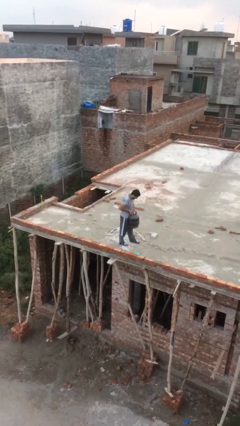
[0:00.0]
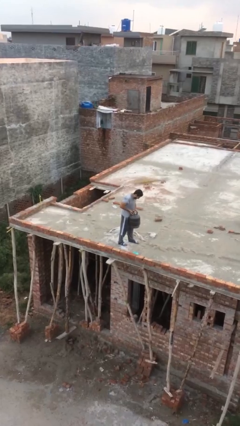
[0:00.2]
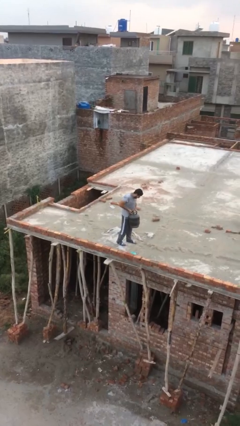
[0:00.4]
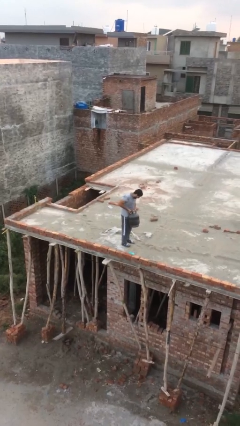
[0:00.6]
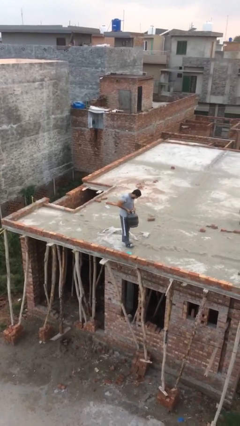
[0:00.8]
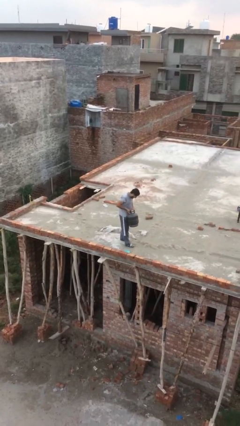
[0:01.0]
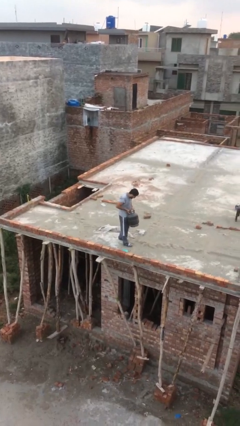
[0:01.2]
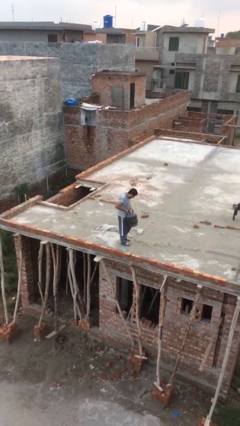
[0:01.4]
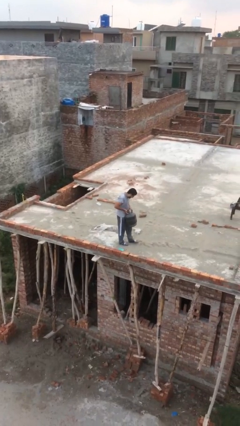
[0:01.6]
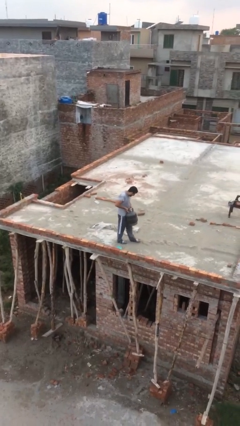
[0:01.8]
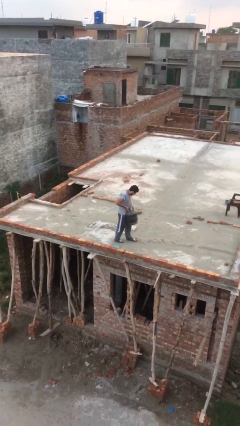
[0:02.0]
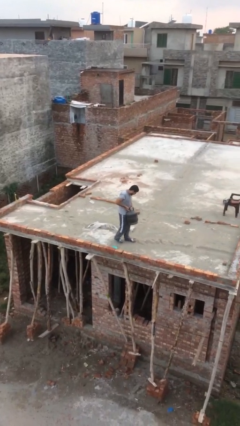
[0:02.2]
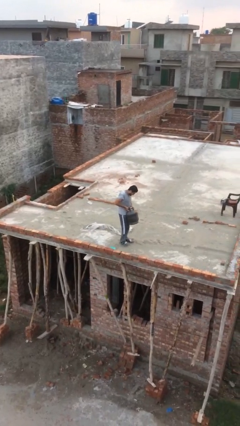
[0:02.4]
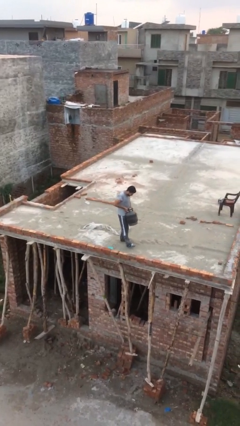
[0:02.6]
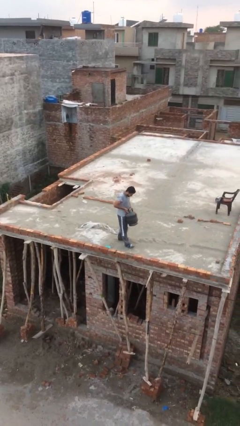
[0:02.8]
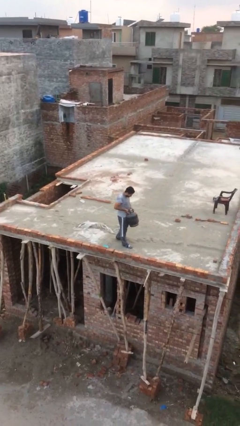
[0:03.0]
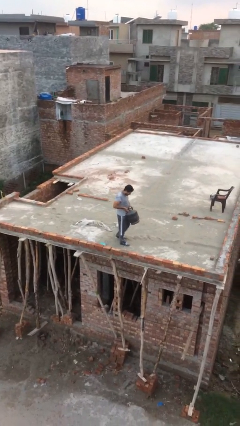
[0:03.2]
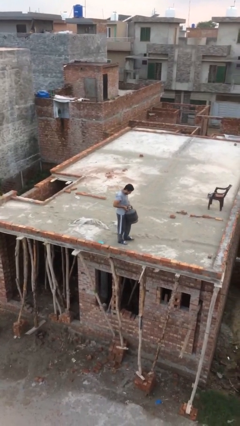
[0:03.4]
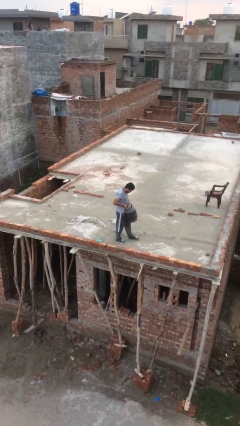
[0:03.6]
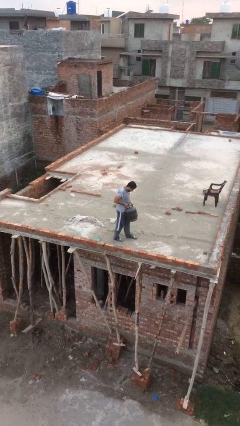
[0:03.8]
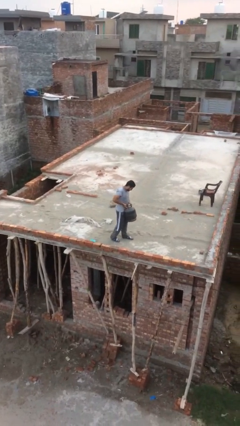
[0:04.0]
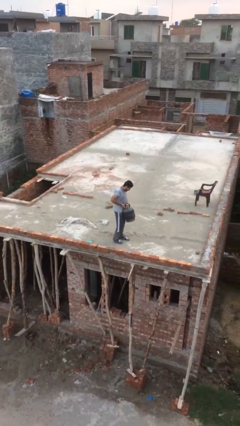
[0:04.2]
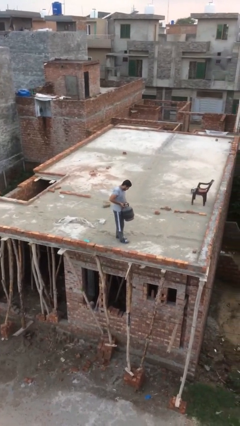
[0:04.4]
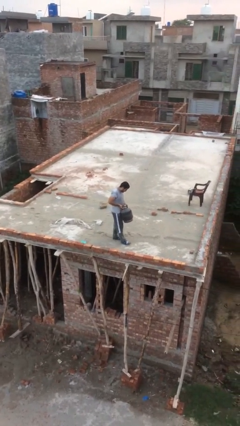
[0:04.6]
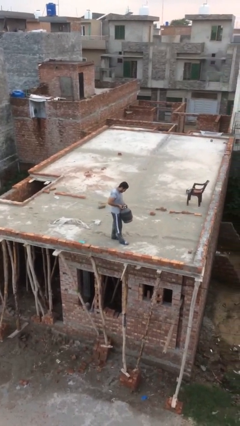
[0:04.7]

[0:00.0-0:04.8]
person carries heavy object

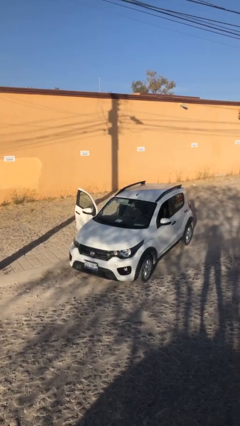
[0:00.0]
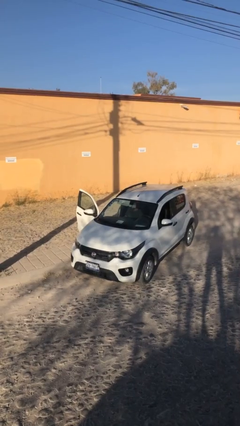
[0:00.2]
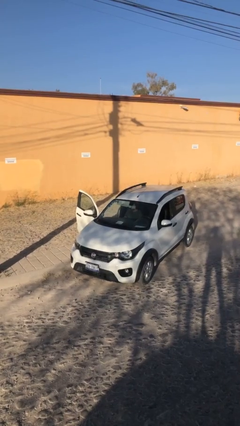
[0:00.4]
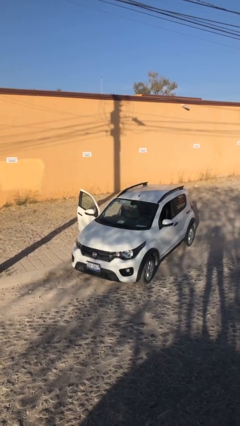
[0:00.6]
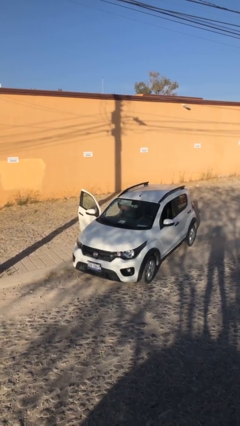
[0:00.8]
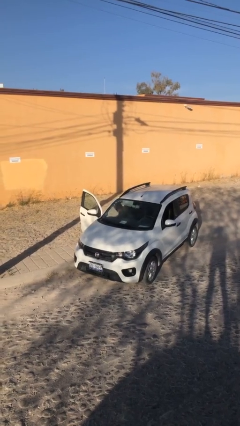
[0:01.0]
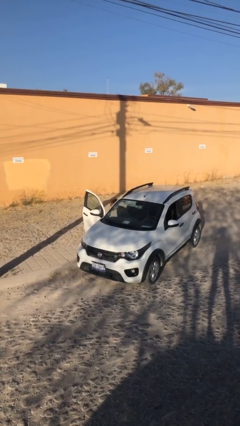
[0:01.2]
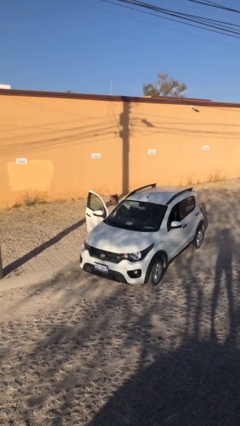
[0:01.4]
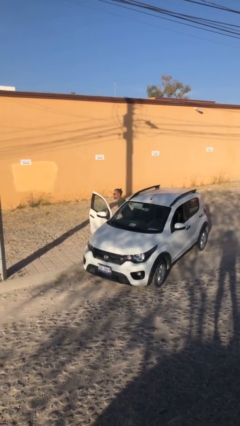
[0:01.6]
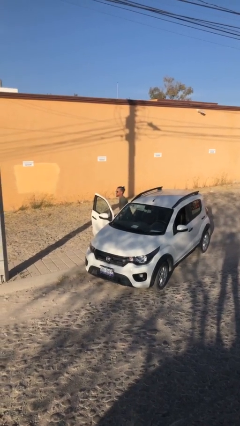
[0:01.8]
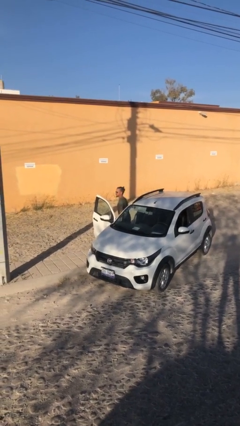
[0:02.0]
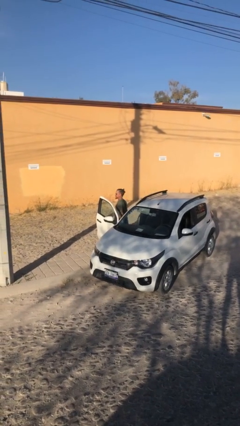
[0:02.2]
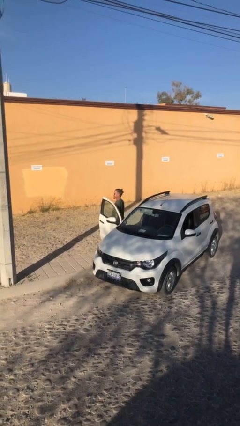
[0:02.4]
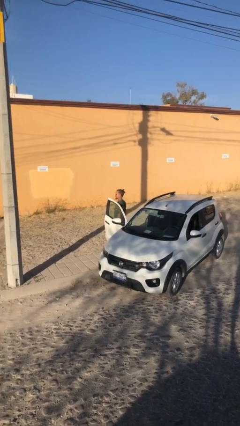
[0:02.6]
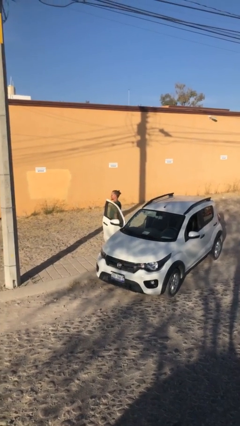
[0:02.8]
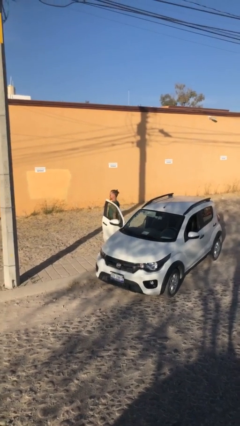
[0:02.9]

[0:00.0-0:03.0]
person exits car

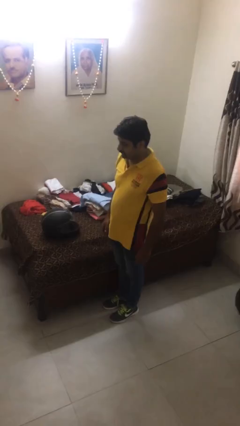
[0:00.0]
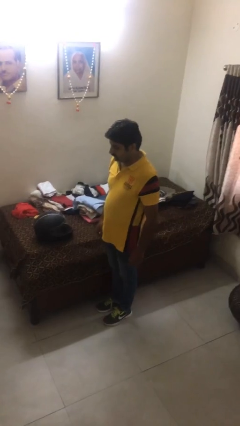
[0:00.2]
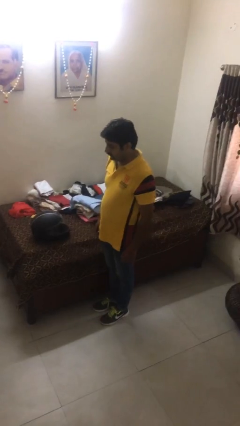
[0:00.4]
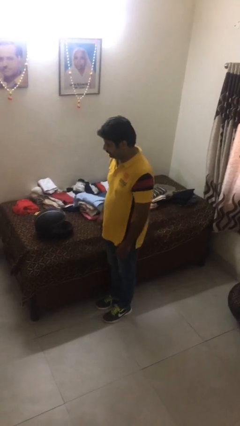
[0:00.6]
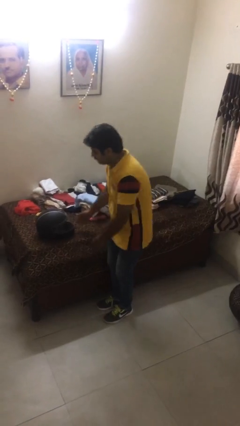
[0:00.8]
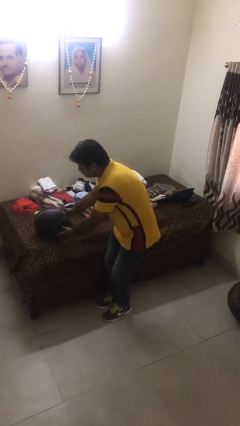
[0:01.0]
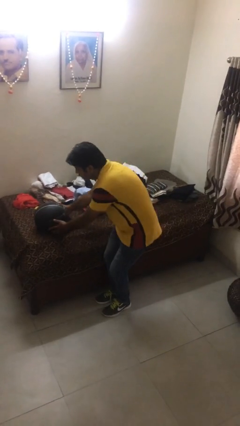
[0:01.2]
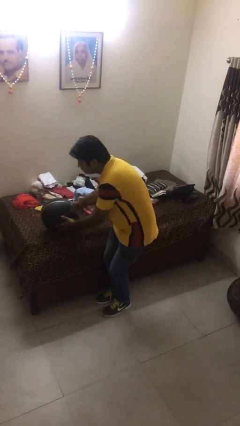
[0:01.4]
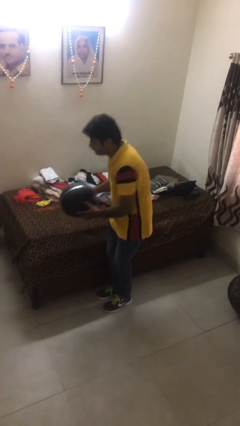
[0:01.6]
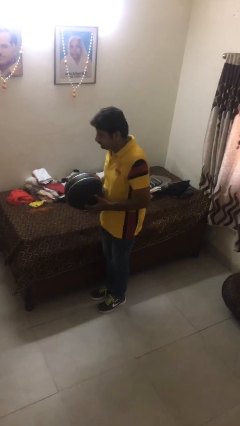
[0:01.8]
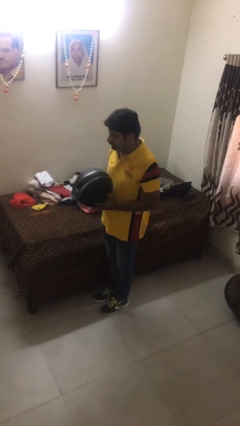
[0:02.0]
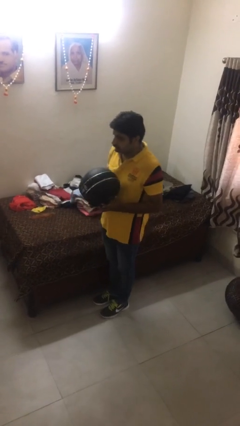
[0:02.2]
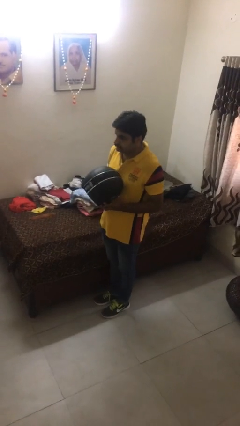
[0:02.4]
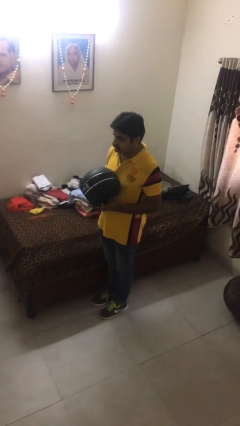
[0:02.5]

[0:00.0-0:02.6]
person picks up object from bed

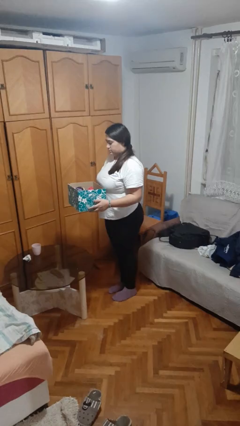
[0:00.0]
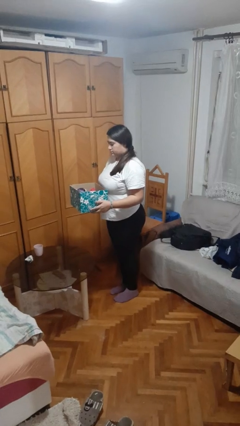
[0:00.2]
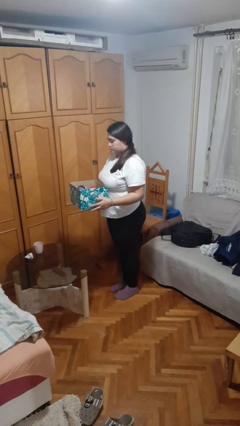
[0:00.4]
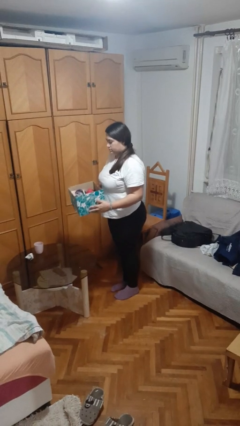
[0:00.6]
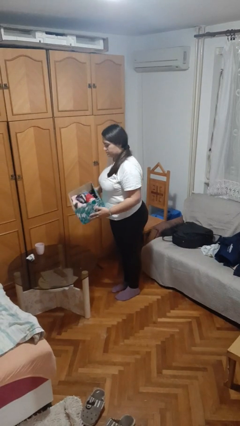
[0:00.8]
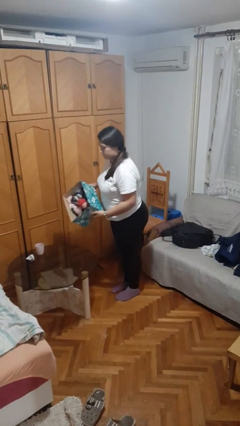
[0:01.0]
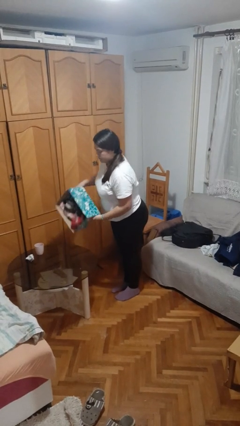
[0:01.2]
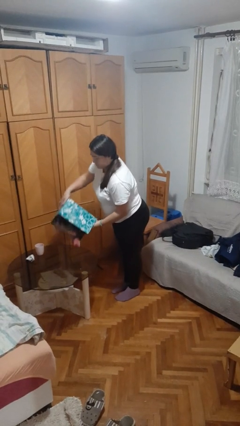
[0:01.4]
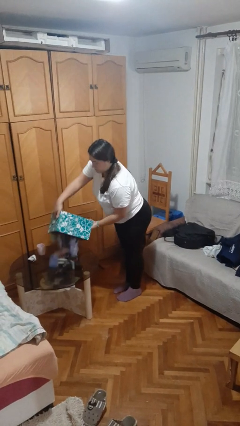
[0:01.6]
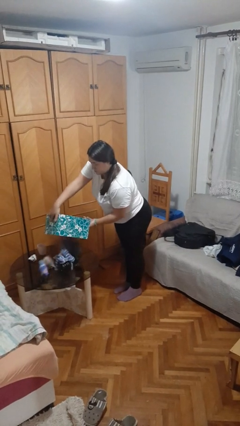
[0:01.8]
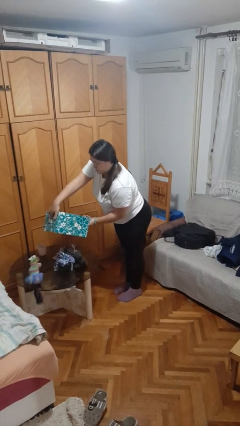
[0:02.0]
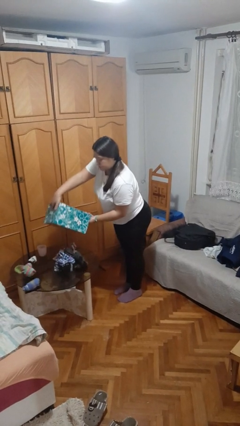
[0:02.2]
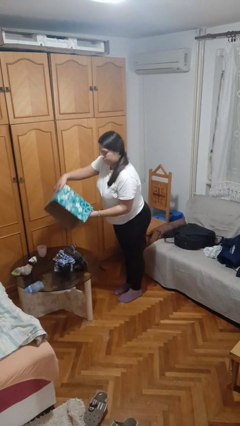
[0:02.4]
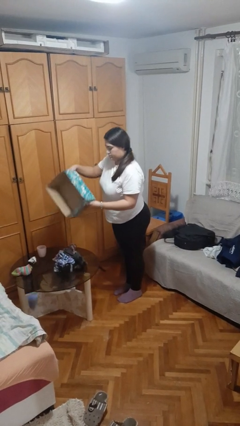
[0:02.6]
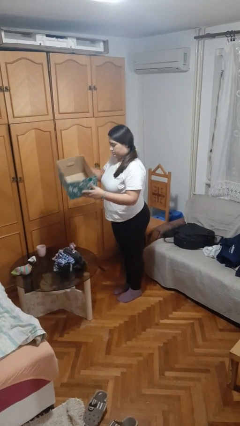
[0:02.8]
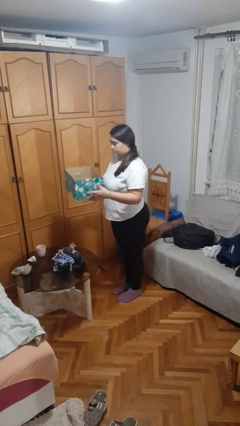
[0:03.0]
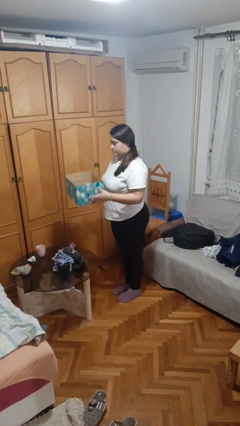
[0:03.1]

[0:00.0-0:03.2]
person unloads box onto floor

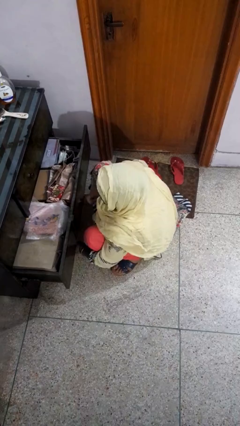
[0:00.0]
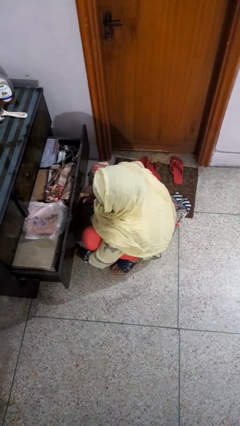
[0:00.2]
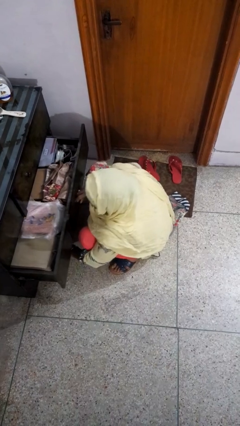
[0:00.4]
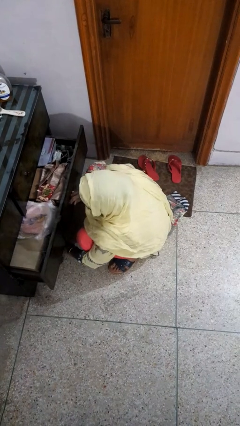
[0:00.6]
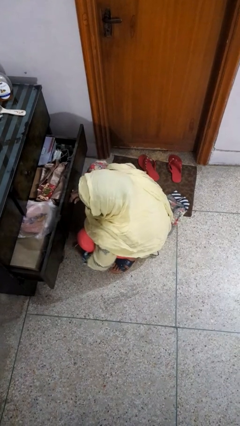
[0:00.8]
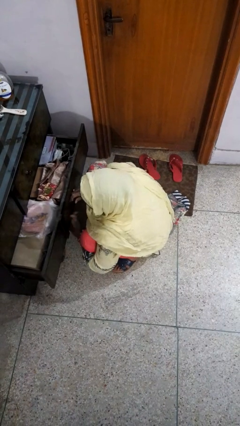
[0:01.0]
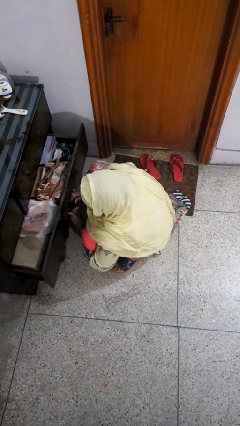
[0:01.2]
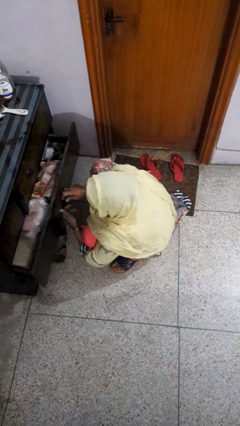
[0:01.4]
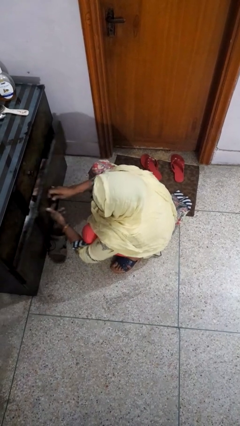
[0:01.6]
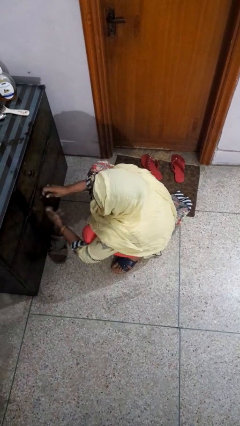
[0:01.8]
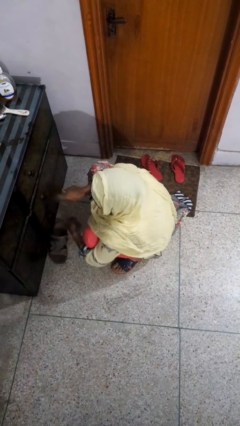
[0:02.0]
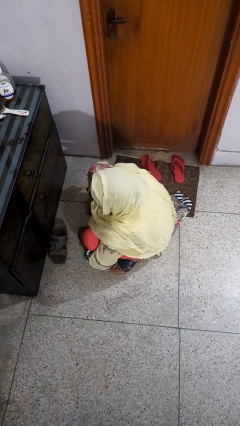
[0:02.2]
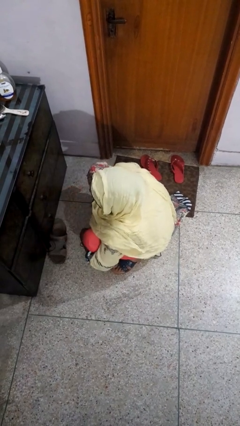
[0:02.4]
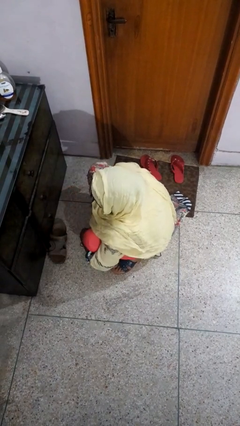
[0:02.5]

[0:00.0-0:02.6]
person closes dresser drawer

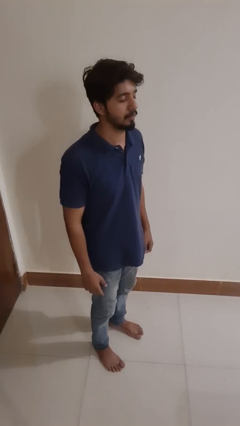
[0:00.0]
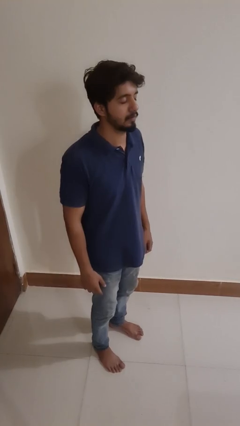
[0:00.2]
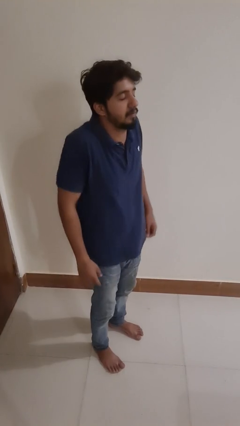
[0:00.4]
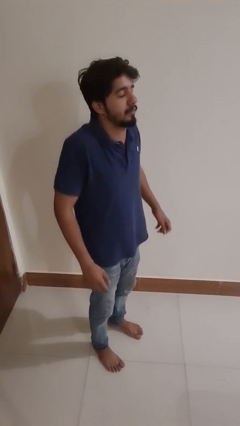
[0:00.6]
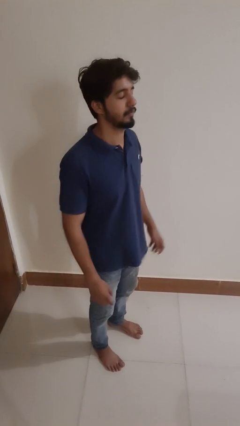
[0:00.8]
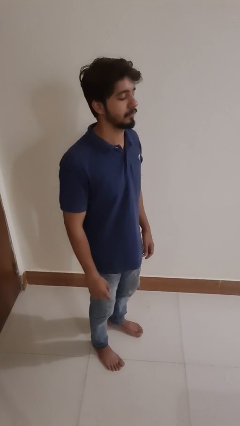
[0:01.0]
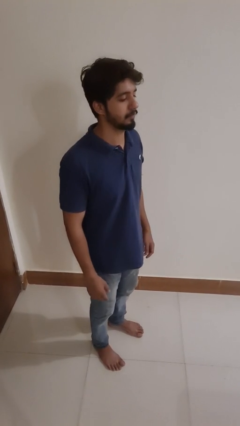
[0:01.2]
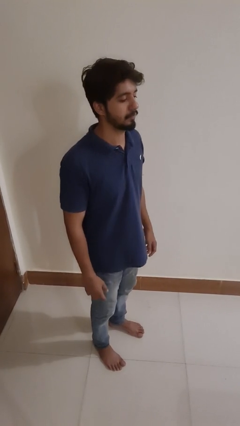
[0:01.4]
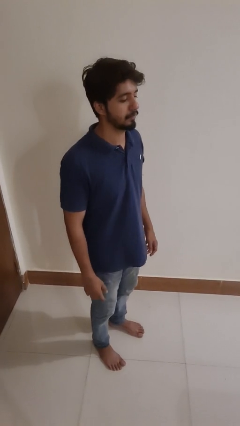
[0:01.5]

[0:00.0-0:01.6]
person shrugs
